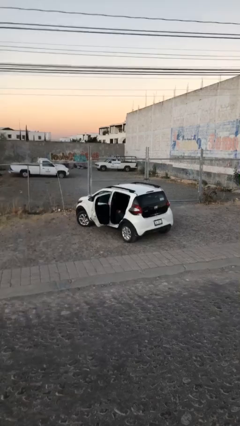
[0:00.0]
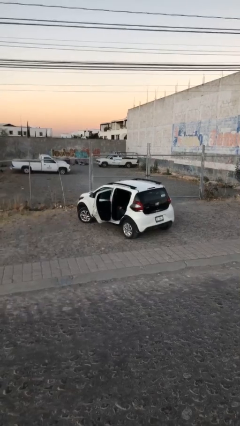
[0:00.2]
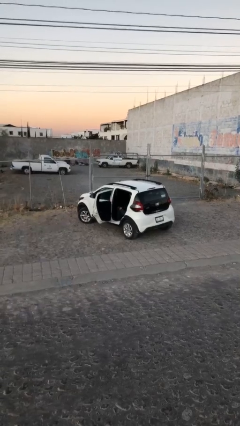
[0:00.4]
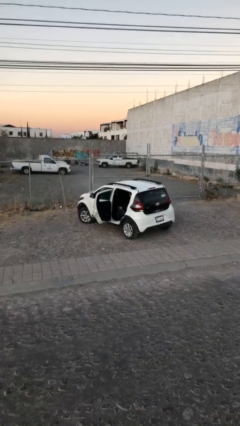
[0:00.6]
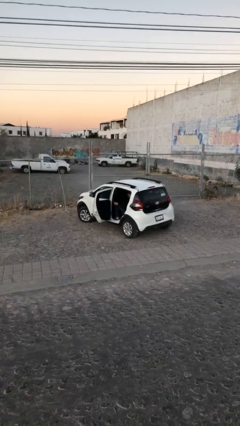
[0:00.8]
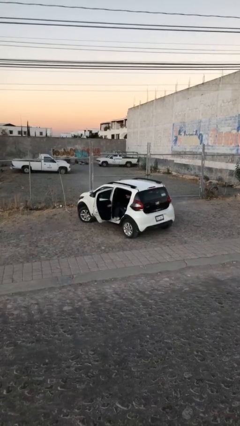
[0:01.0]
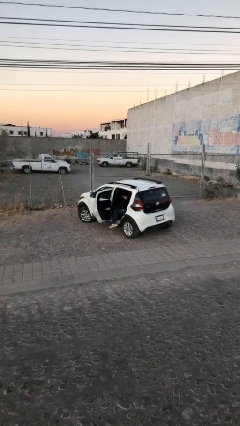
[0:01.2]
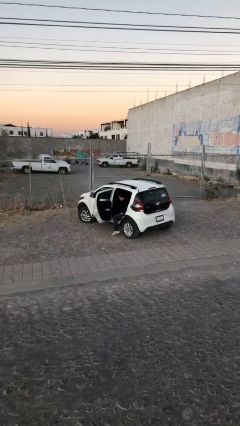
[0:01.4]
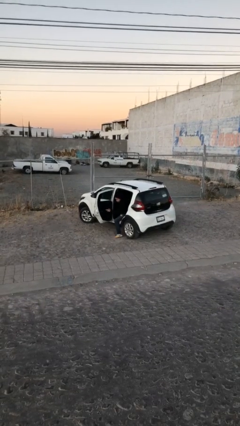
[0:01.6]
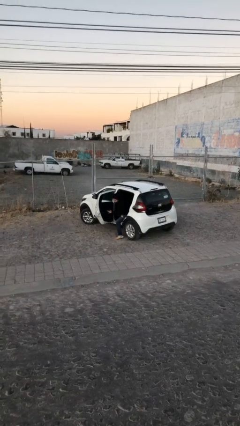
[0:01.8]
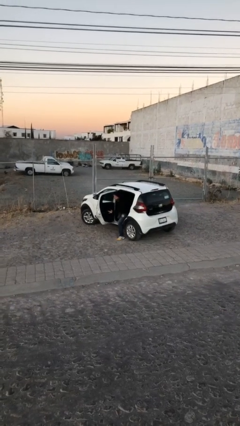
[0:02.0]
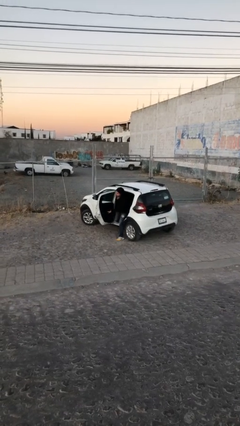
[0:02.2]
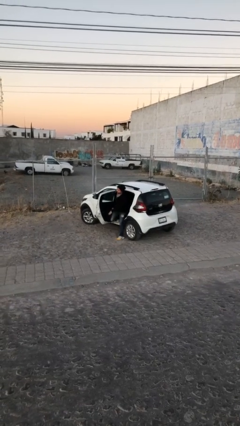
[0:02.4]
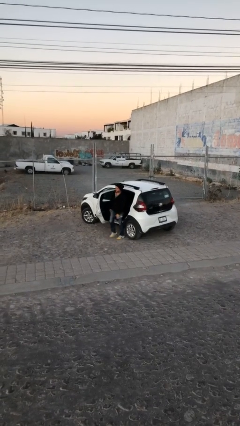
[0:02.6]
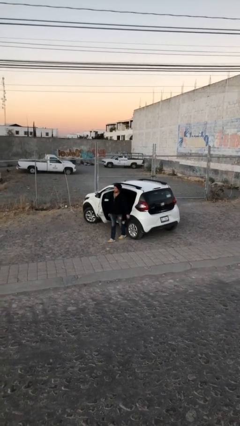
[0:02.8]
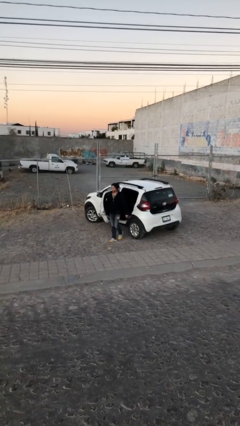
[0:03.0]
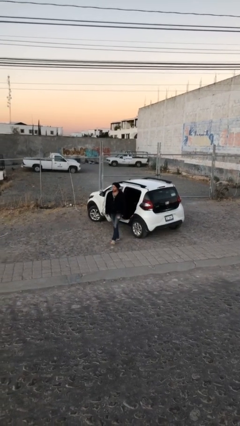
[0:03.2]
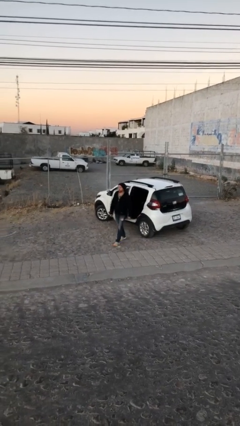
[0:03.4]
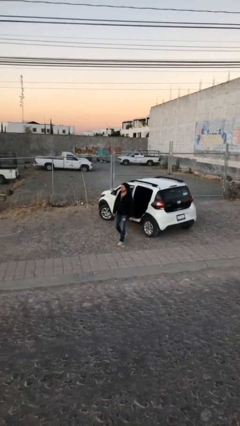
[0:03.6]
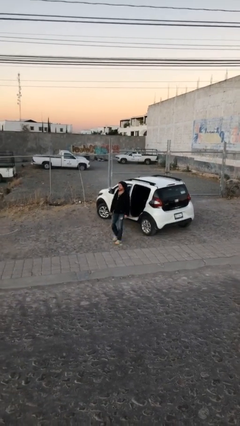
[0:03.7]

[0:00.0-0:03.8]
person exits car

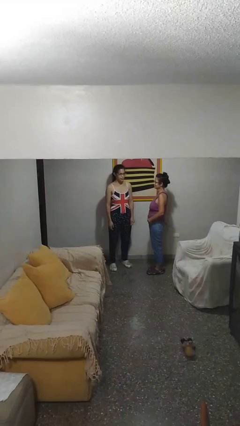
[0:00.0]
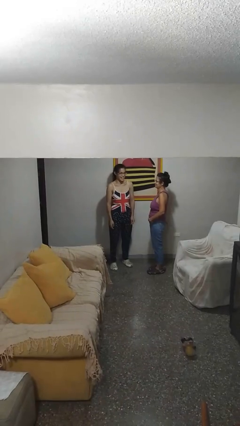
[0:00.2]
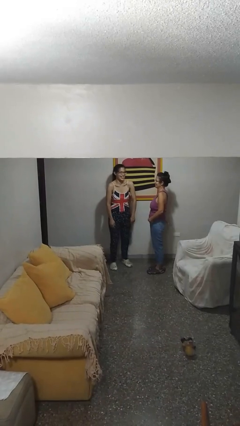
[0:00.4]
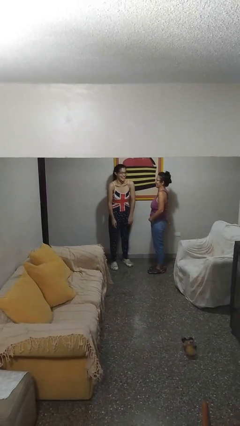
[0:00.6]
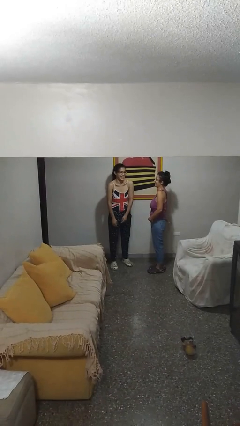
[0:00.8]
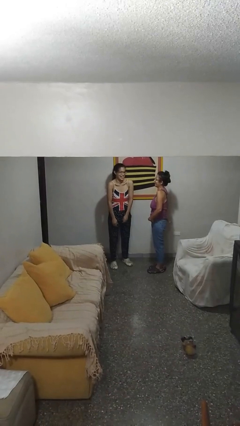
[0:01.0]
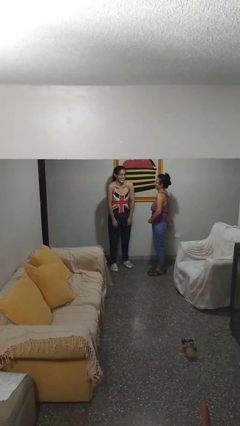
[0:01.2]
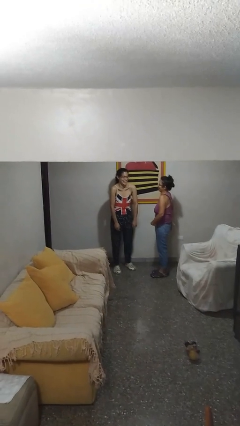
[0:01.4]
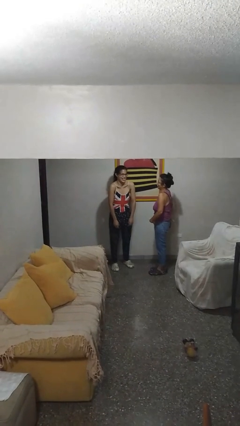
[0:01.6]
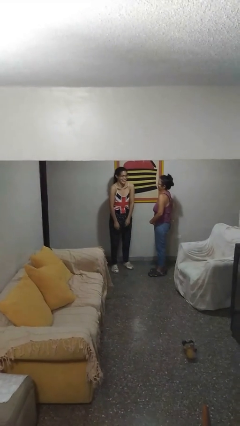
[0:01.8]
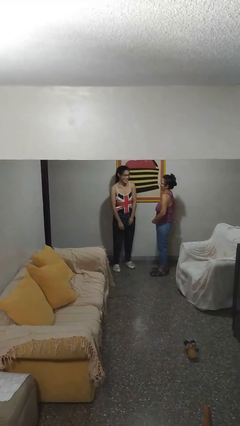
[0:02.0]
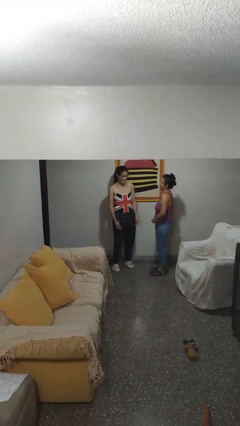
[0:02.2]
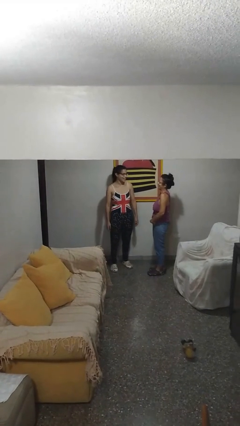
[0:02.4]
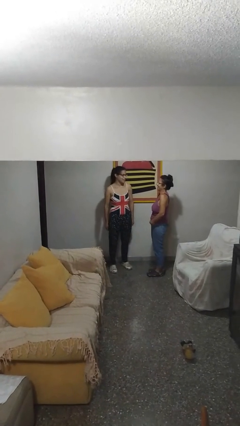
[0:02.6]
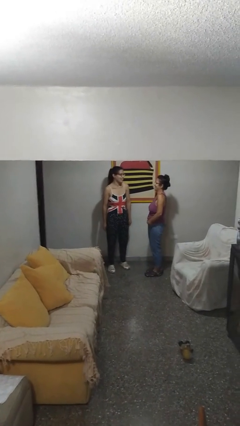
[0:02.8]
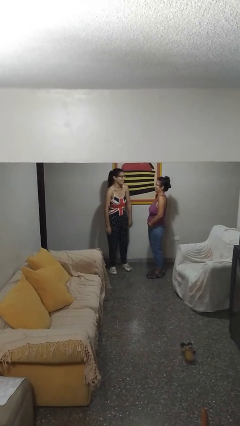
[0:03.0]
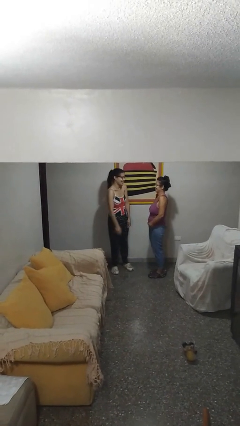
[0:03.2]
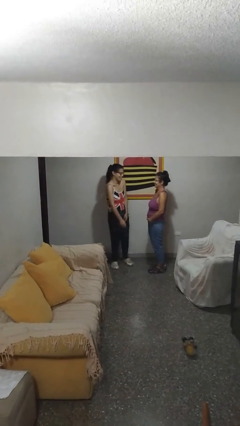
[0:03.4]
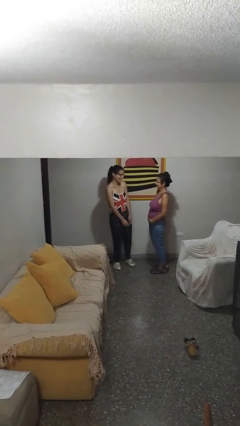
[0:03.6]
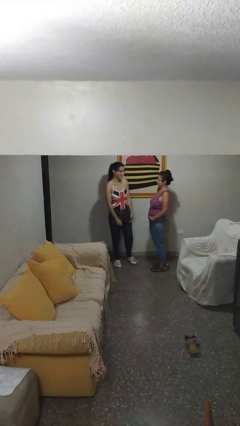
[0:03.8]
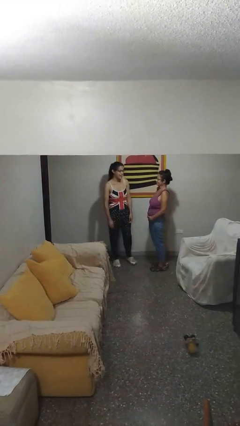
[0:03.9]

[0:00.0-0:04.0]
person laughs with person

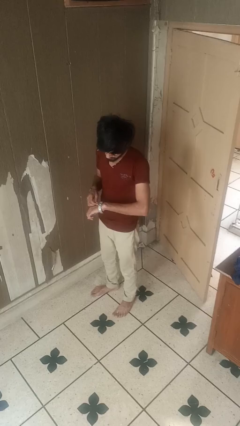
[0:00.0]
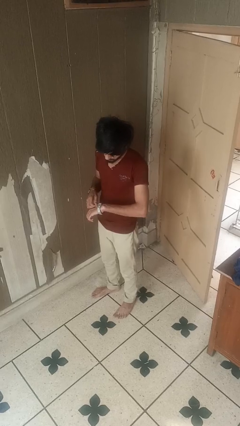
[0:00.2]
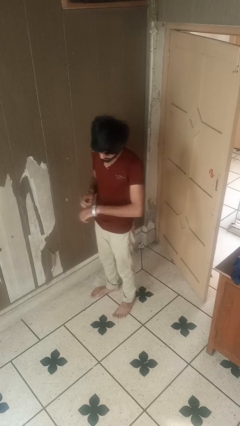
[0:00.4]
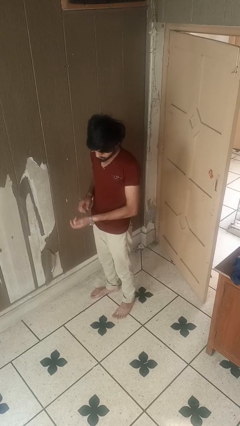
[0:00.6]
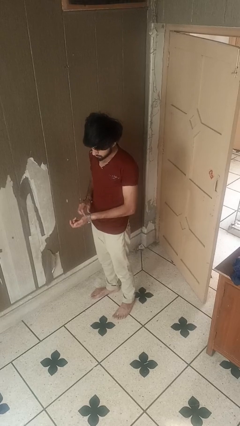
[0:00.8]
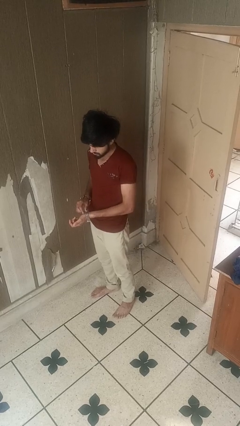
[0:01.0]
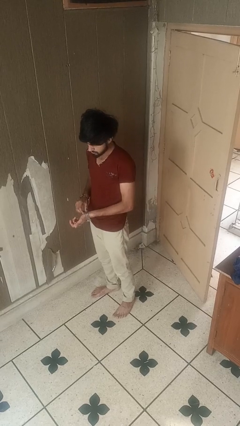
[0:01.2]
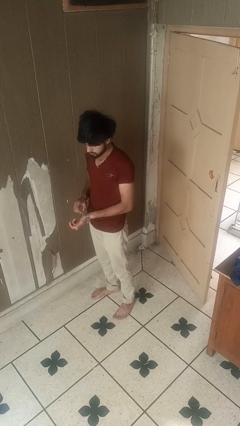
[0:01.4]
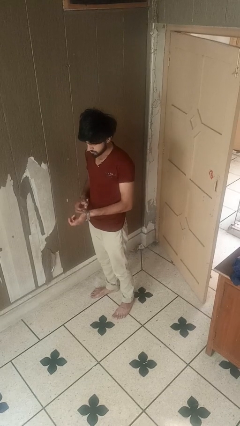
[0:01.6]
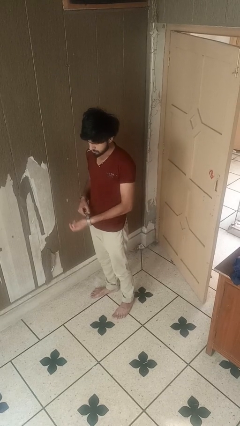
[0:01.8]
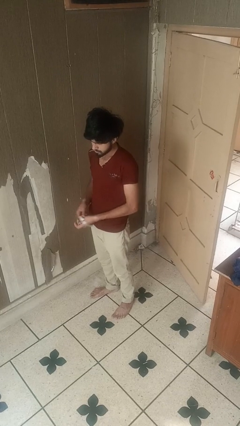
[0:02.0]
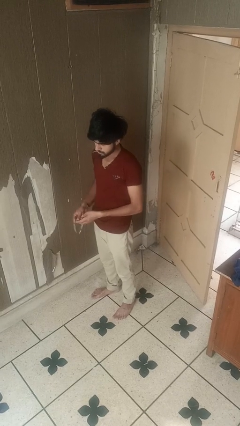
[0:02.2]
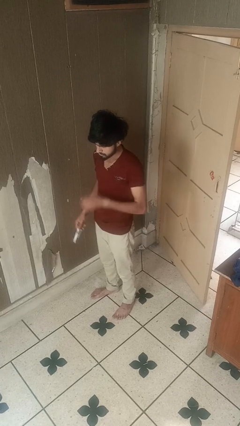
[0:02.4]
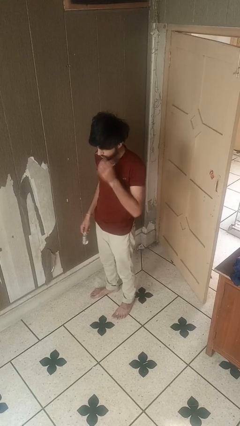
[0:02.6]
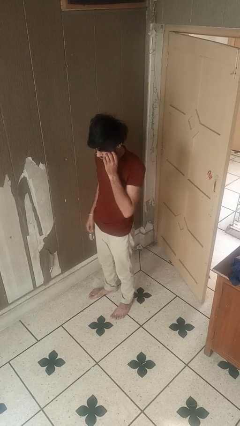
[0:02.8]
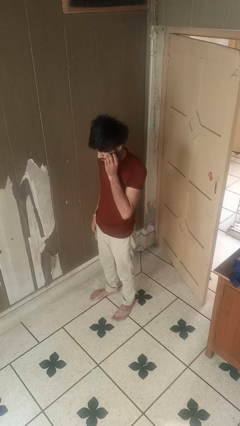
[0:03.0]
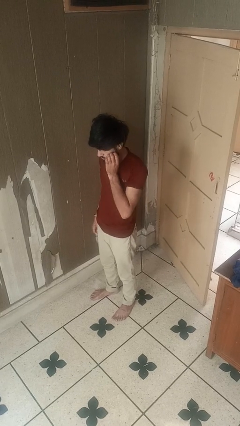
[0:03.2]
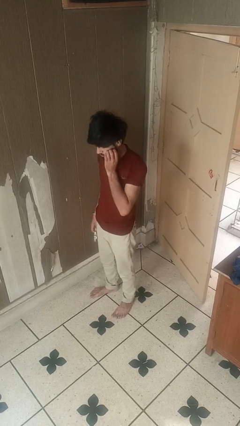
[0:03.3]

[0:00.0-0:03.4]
person takes off wristwatch

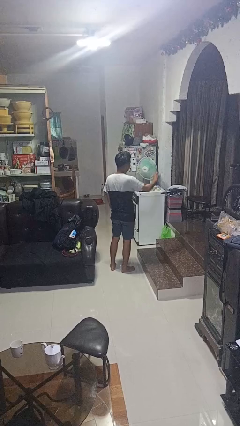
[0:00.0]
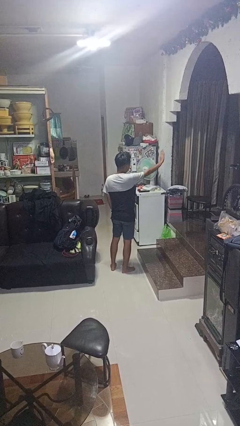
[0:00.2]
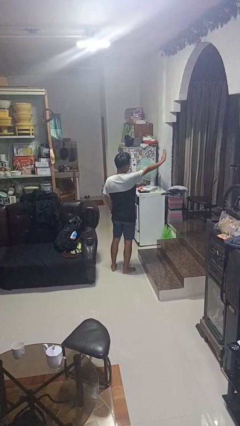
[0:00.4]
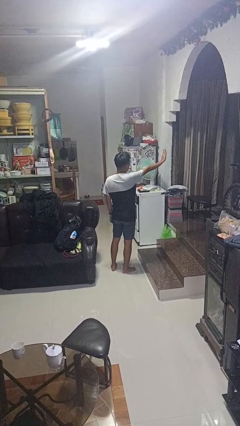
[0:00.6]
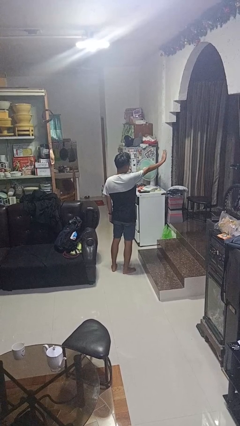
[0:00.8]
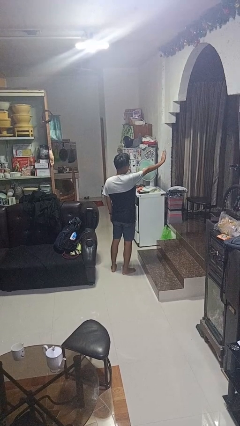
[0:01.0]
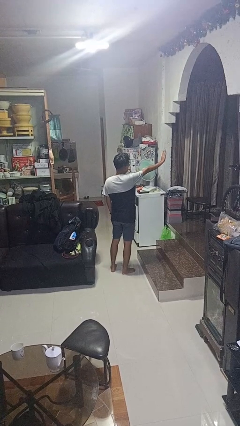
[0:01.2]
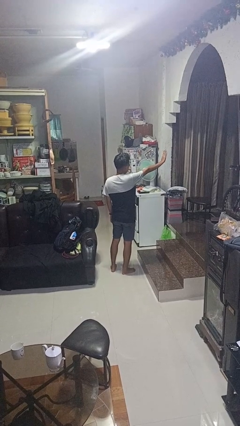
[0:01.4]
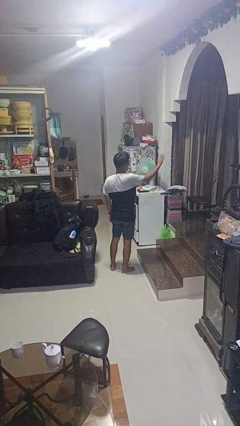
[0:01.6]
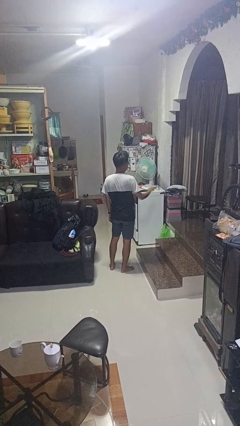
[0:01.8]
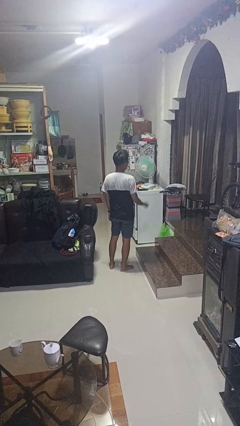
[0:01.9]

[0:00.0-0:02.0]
person gestures stop

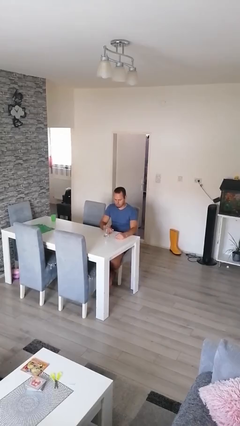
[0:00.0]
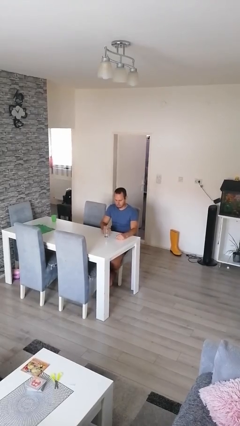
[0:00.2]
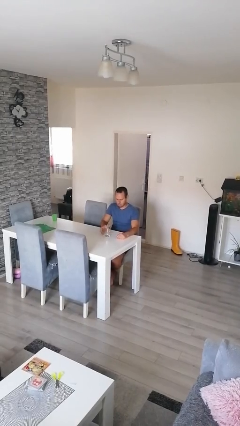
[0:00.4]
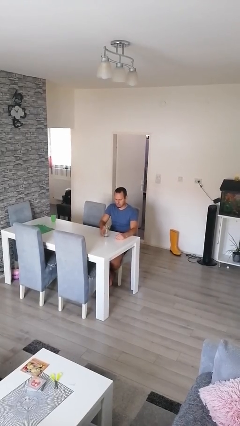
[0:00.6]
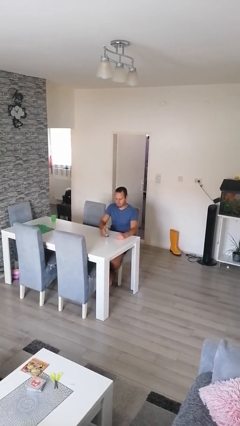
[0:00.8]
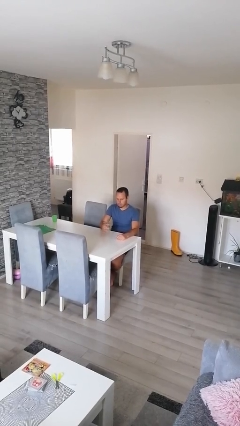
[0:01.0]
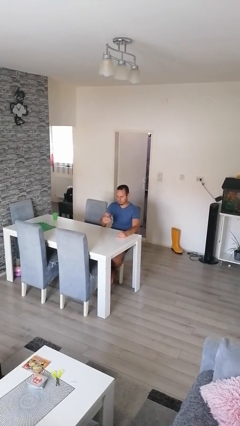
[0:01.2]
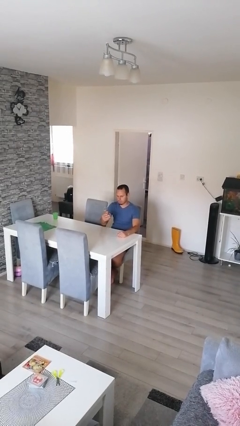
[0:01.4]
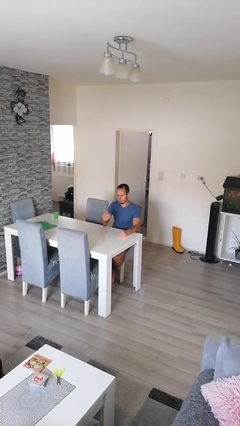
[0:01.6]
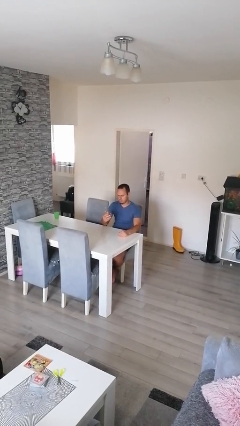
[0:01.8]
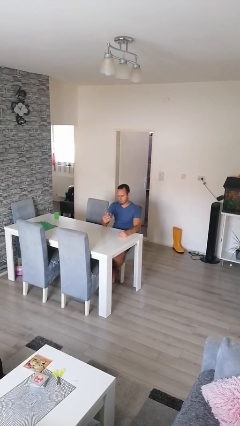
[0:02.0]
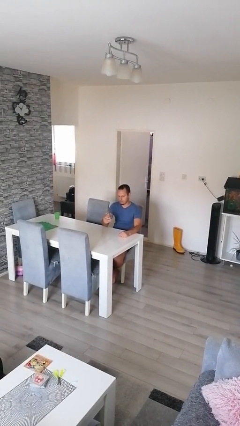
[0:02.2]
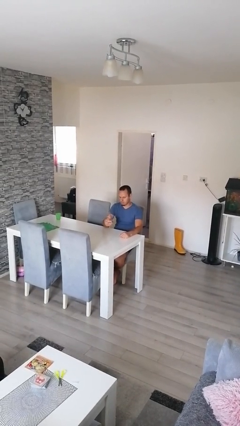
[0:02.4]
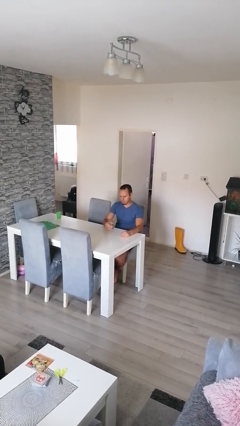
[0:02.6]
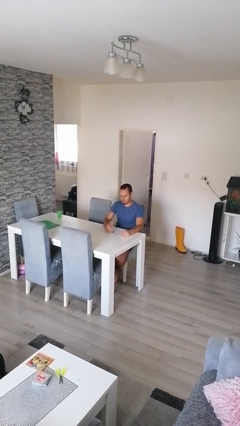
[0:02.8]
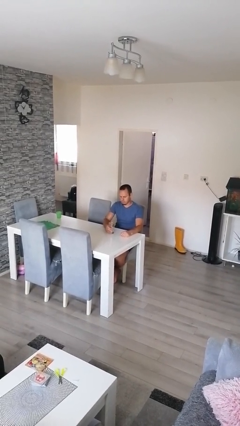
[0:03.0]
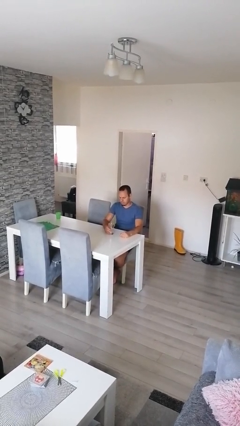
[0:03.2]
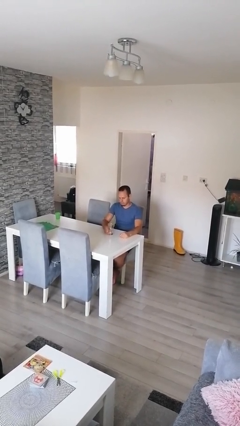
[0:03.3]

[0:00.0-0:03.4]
person sets upright glass

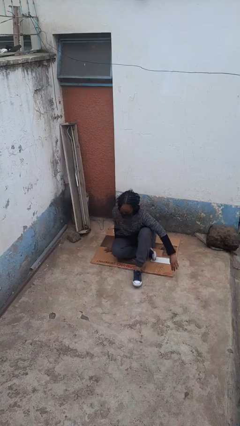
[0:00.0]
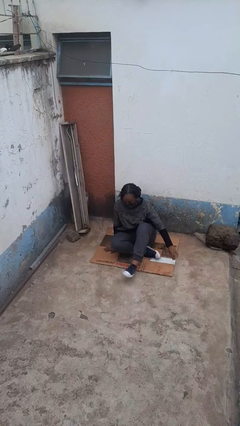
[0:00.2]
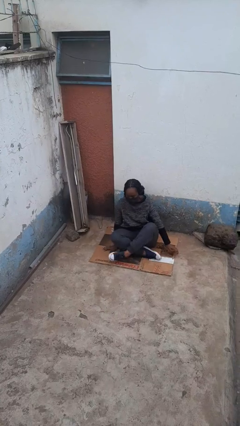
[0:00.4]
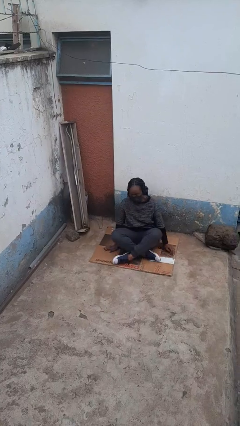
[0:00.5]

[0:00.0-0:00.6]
person stands up from floor
